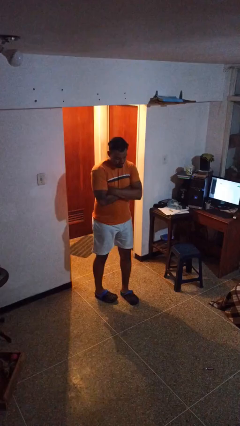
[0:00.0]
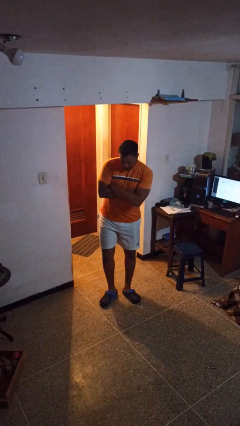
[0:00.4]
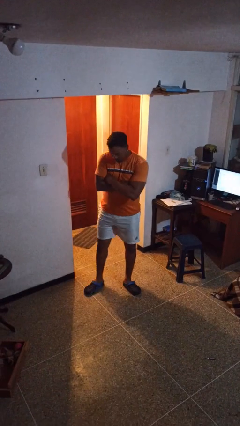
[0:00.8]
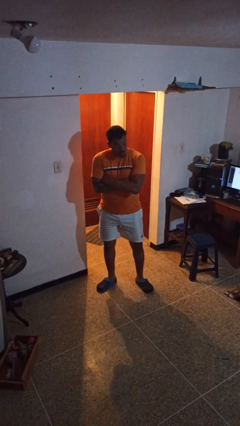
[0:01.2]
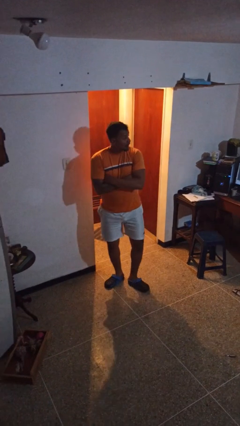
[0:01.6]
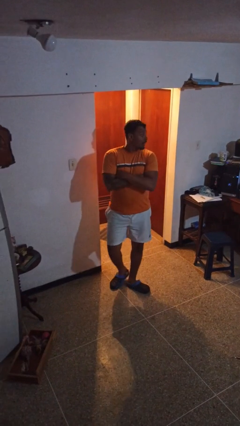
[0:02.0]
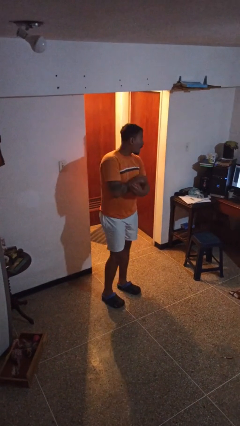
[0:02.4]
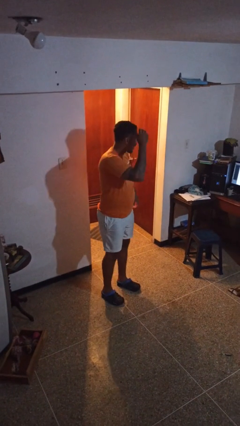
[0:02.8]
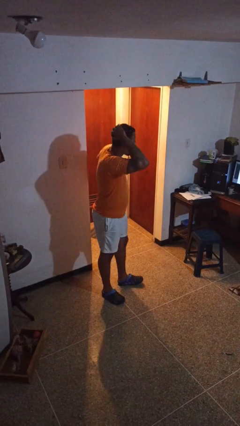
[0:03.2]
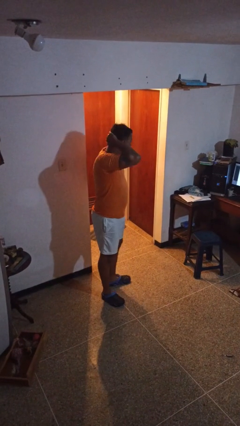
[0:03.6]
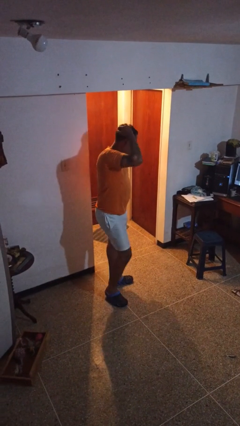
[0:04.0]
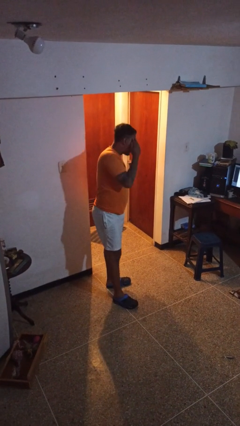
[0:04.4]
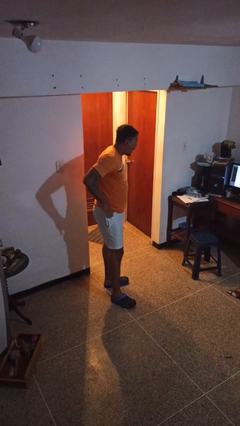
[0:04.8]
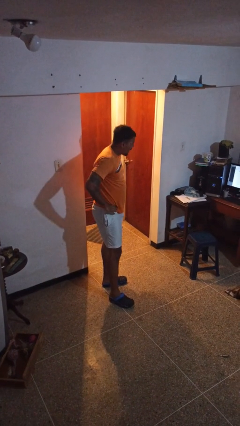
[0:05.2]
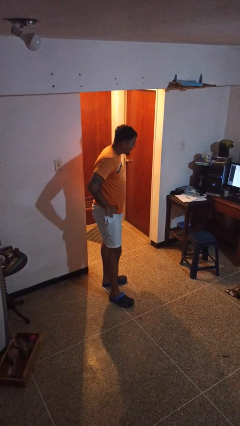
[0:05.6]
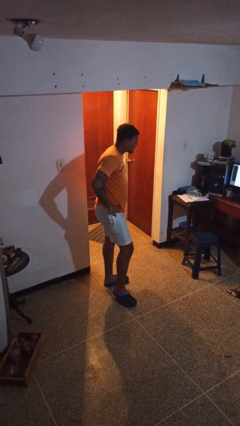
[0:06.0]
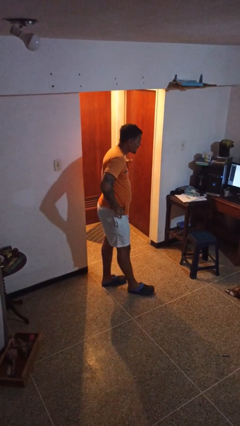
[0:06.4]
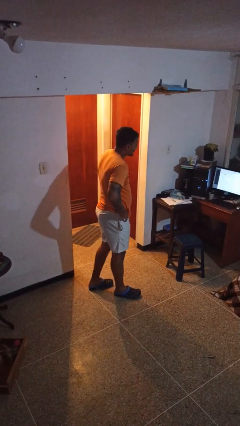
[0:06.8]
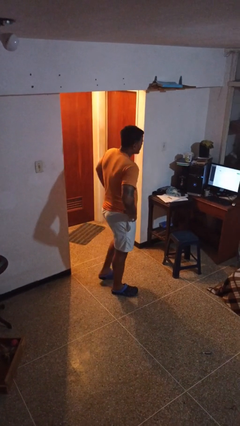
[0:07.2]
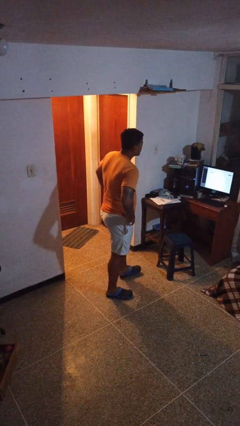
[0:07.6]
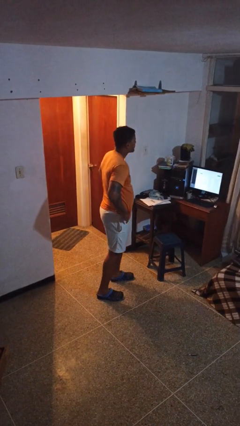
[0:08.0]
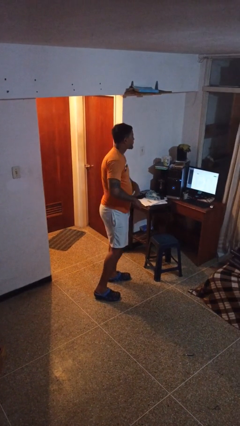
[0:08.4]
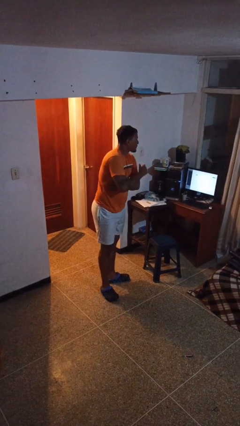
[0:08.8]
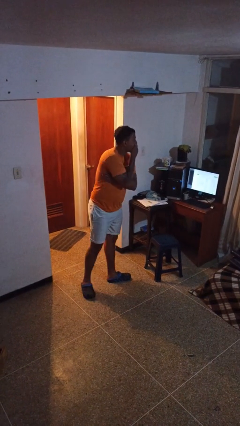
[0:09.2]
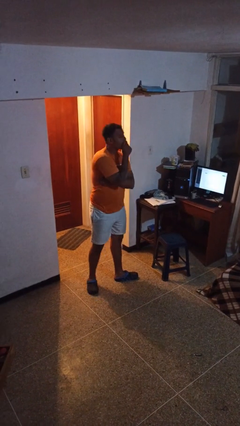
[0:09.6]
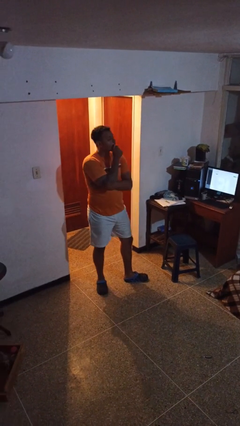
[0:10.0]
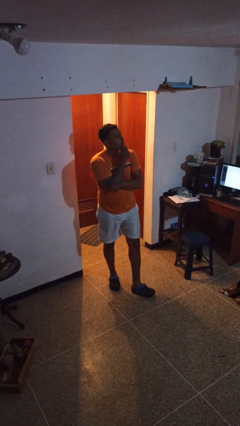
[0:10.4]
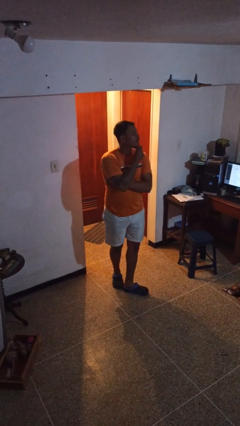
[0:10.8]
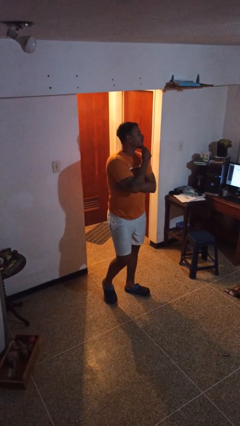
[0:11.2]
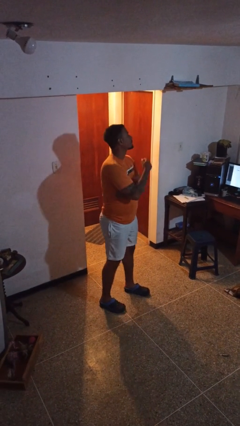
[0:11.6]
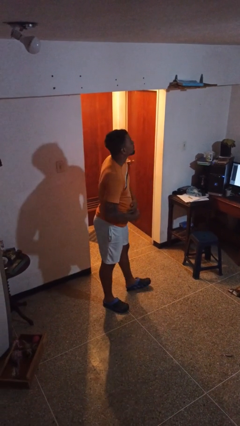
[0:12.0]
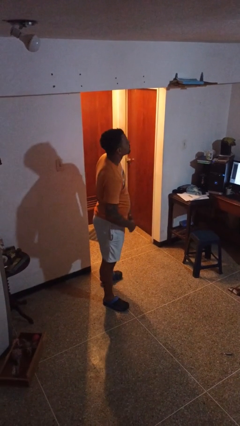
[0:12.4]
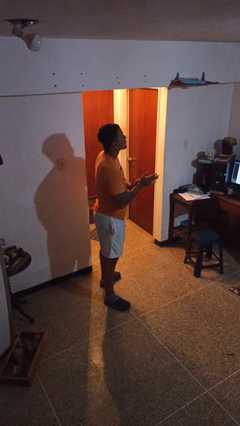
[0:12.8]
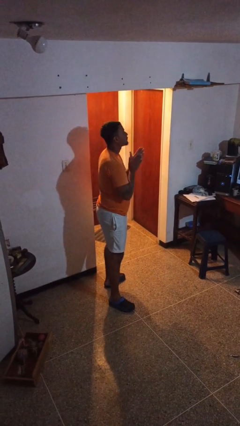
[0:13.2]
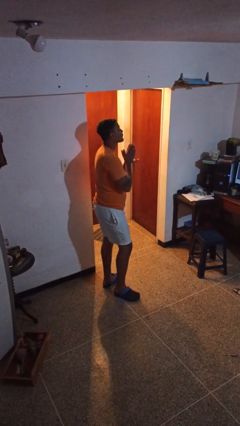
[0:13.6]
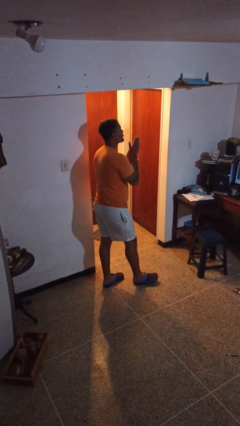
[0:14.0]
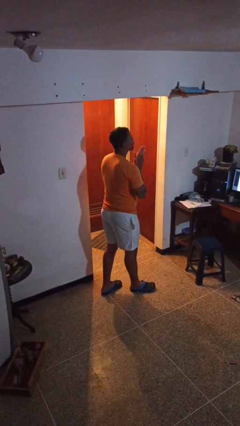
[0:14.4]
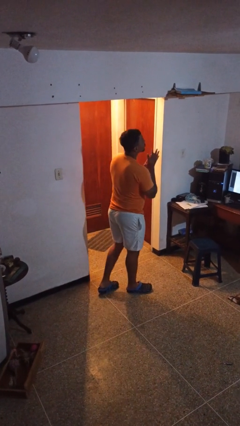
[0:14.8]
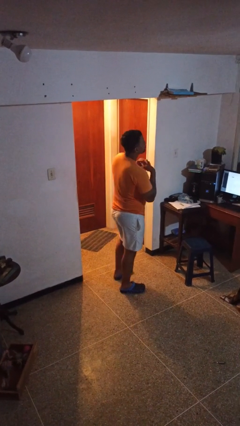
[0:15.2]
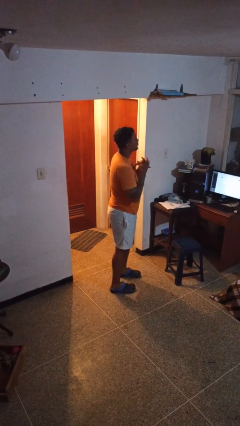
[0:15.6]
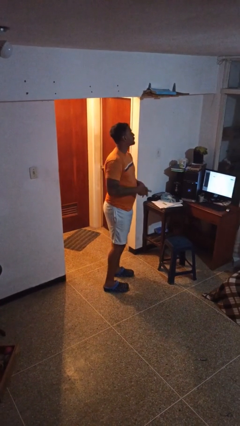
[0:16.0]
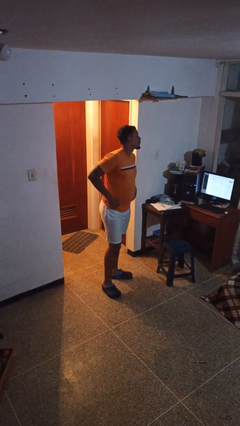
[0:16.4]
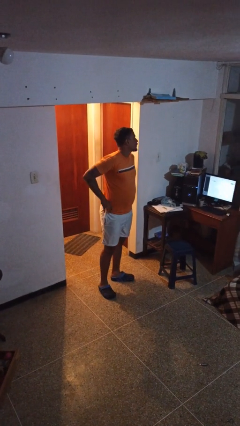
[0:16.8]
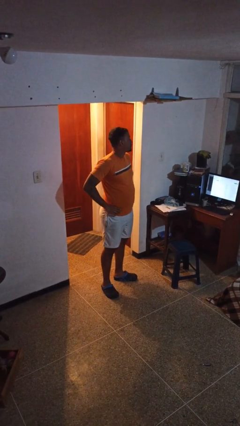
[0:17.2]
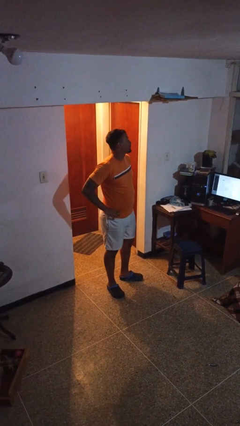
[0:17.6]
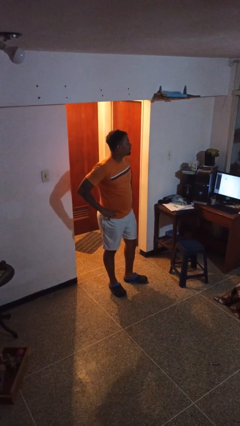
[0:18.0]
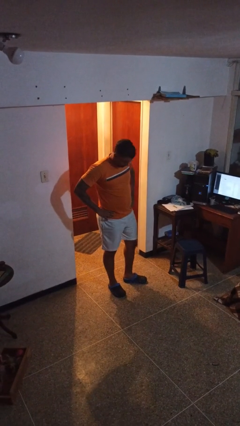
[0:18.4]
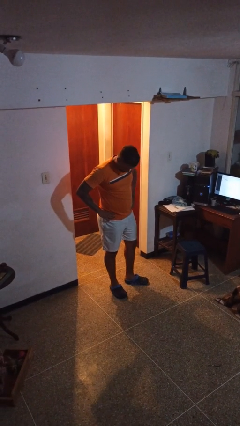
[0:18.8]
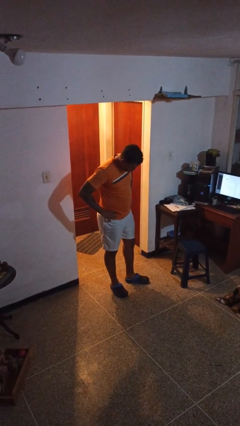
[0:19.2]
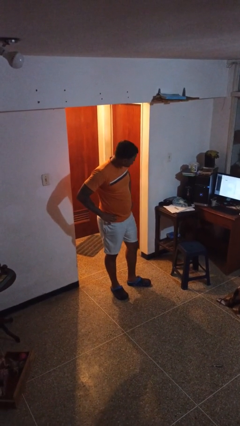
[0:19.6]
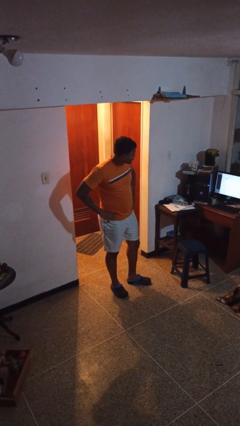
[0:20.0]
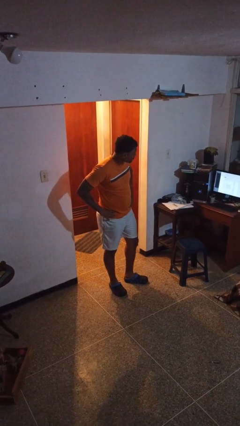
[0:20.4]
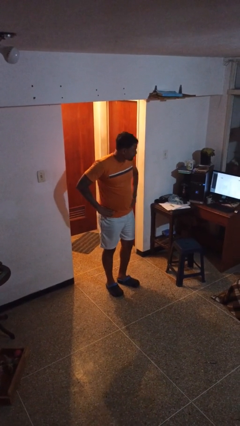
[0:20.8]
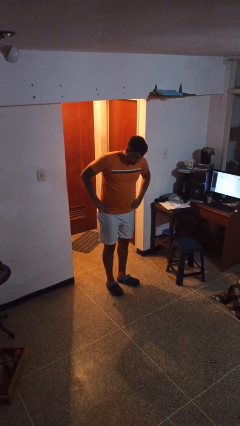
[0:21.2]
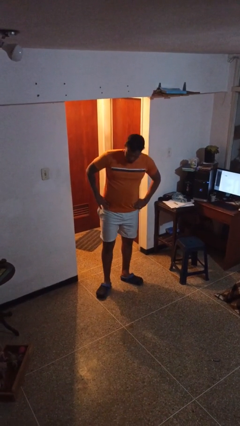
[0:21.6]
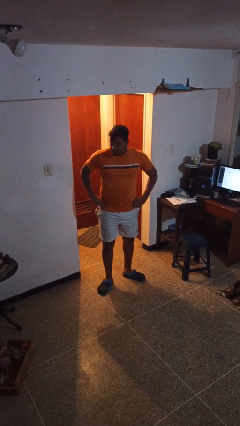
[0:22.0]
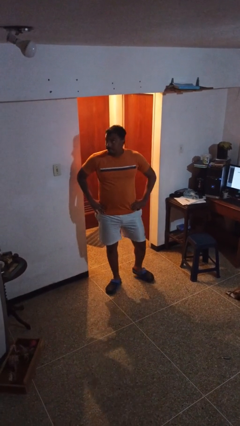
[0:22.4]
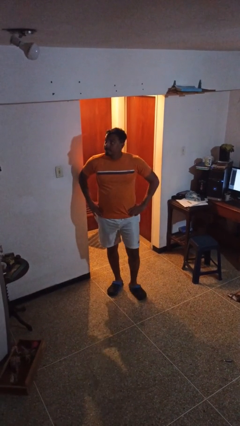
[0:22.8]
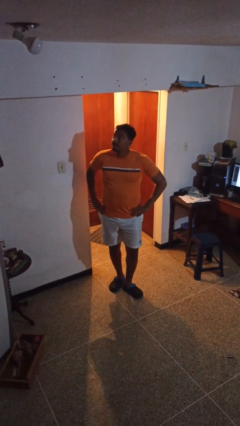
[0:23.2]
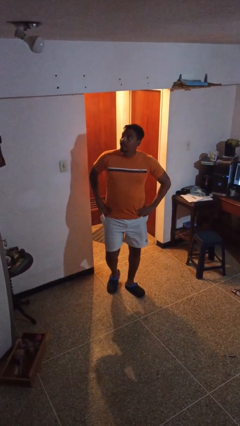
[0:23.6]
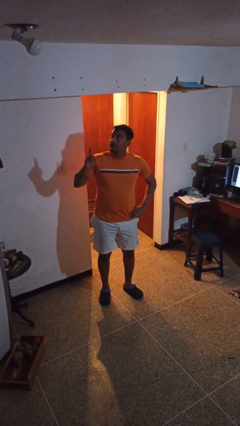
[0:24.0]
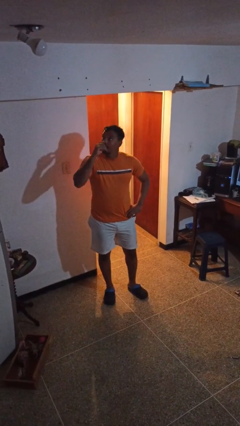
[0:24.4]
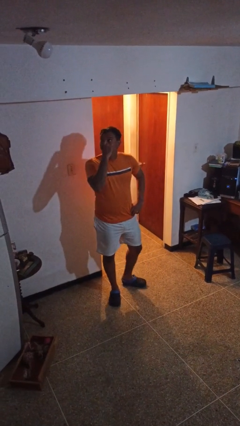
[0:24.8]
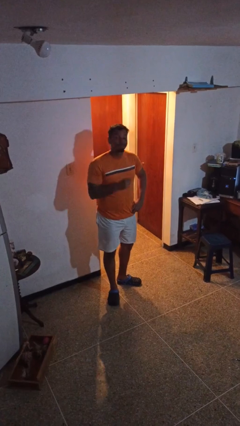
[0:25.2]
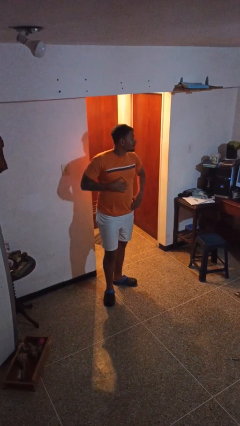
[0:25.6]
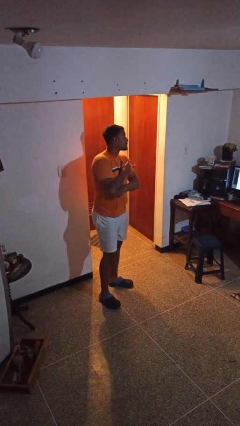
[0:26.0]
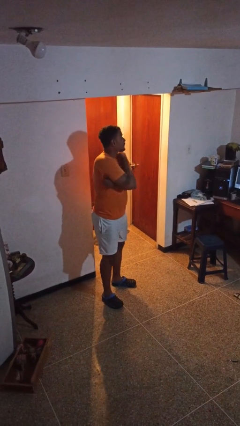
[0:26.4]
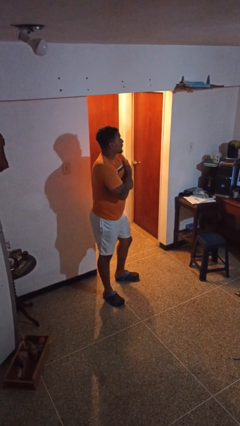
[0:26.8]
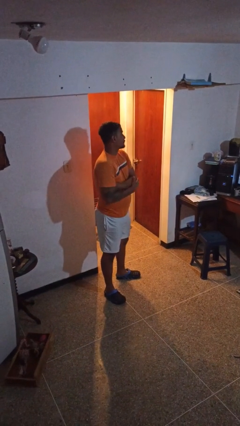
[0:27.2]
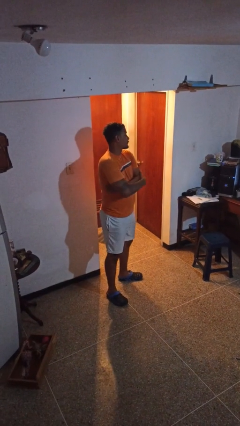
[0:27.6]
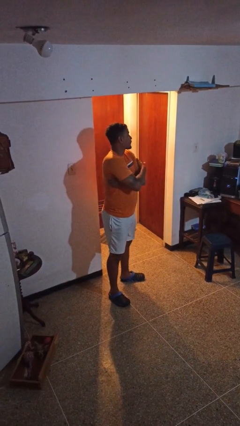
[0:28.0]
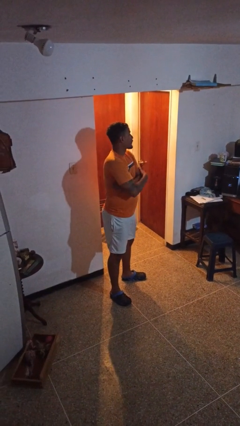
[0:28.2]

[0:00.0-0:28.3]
person walks

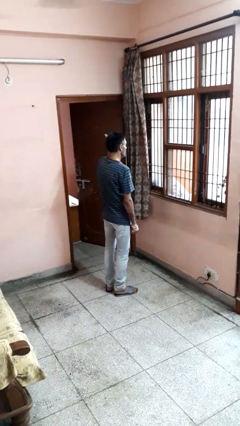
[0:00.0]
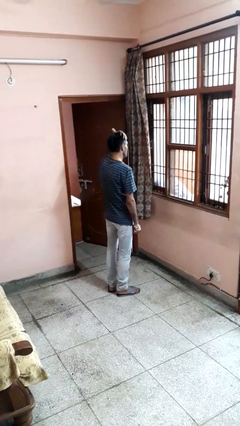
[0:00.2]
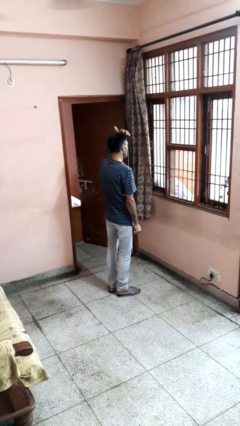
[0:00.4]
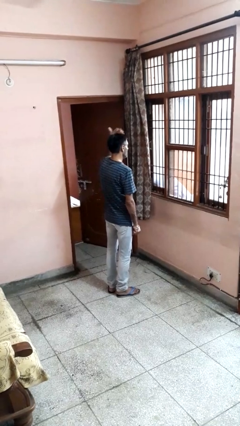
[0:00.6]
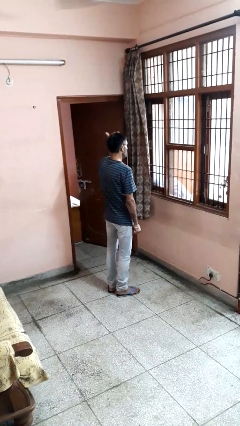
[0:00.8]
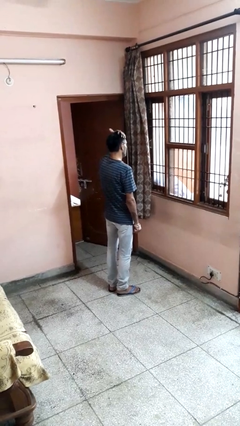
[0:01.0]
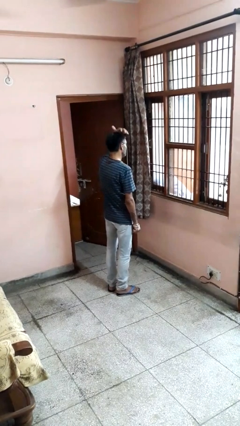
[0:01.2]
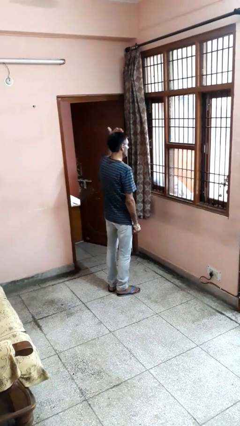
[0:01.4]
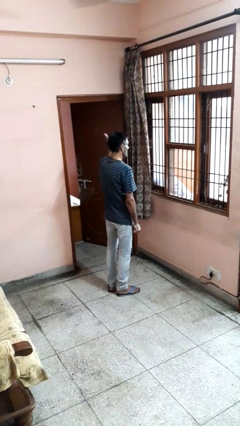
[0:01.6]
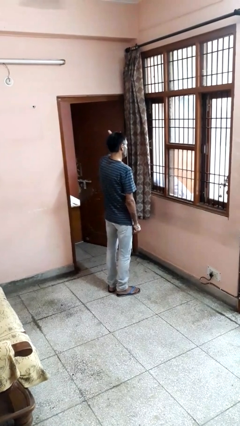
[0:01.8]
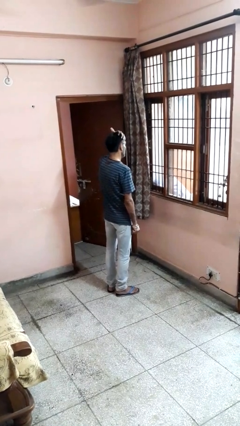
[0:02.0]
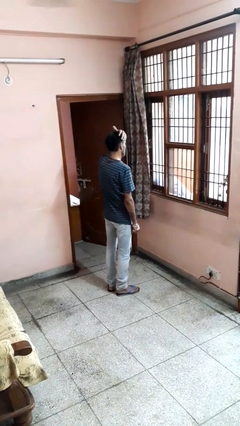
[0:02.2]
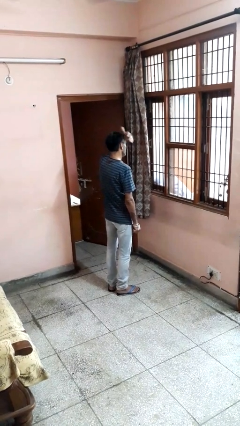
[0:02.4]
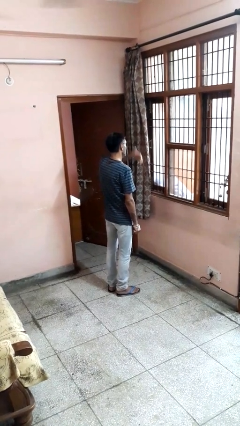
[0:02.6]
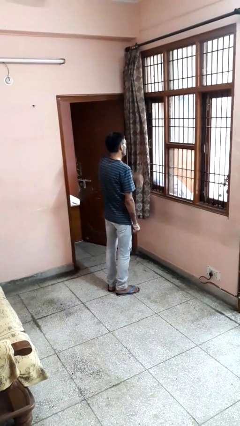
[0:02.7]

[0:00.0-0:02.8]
person strokes hair

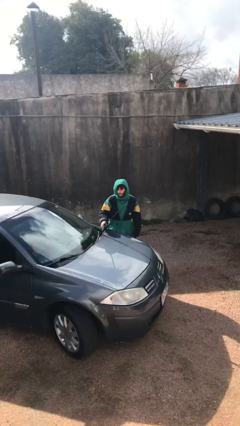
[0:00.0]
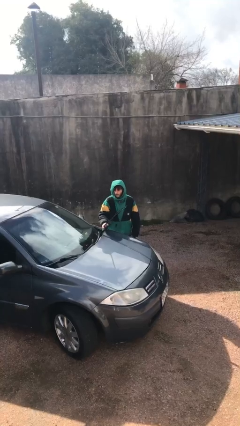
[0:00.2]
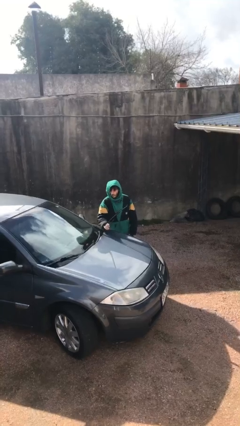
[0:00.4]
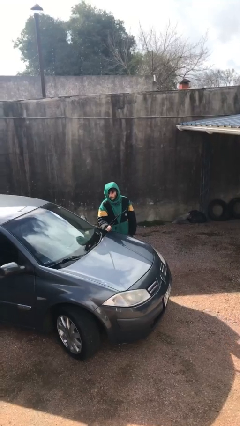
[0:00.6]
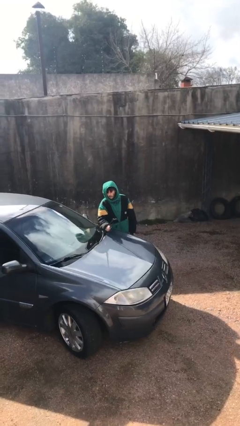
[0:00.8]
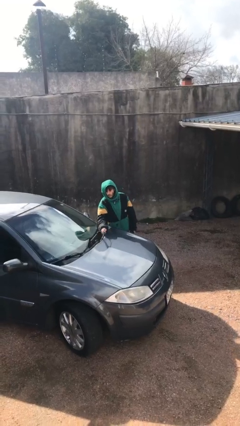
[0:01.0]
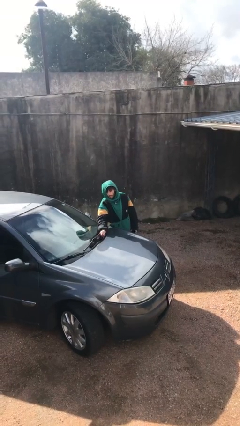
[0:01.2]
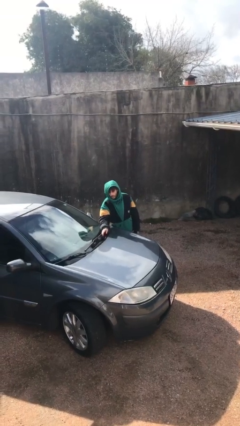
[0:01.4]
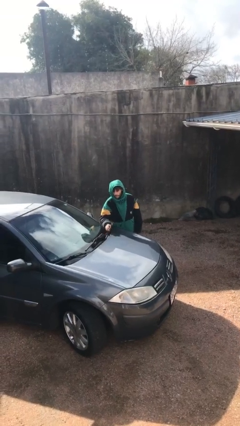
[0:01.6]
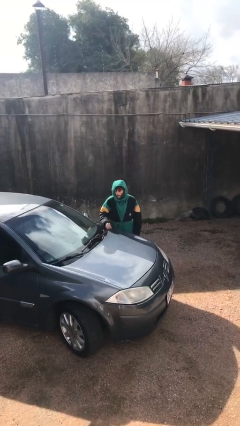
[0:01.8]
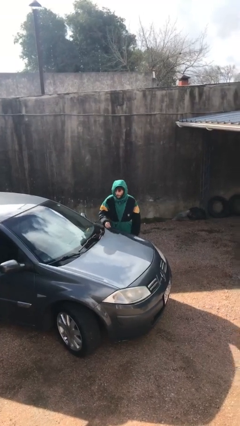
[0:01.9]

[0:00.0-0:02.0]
person flips down car wipers
